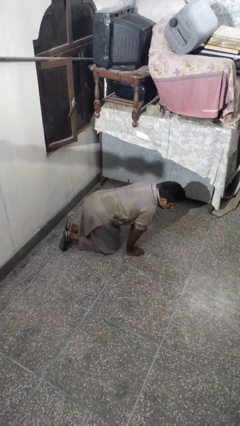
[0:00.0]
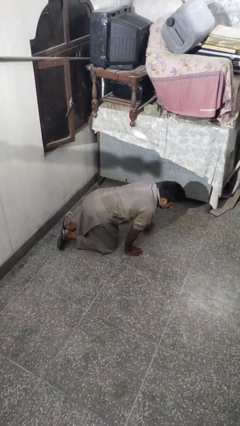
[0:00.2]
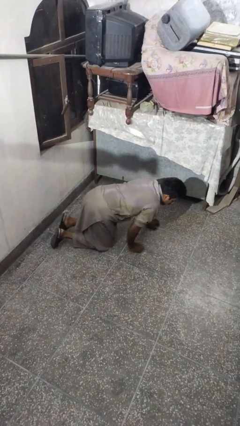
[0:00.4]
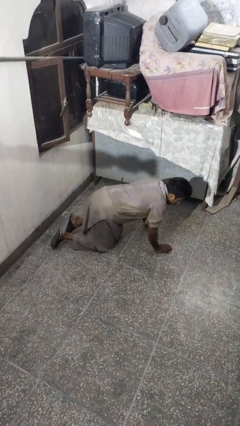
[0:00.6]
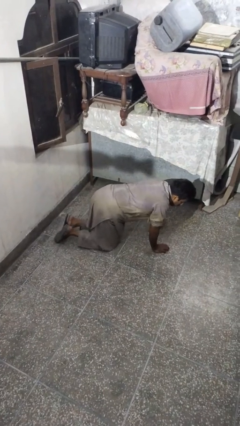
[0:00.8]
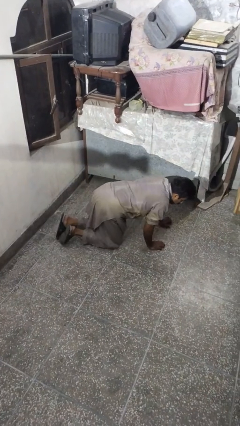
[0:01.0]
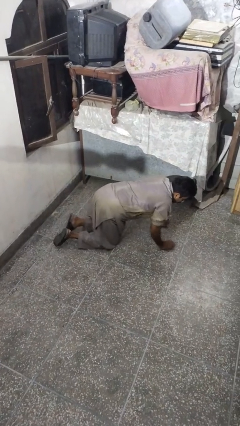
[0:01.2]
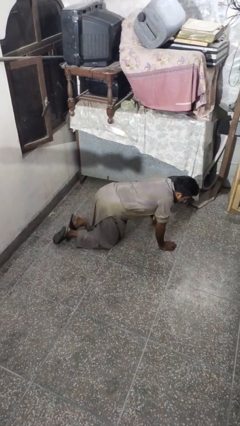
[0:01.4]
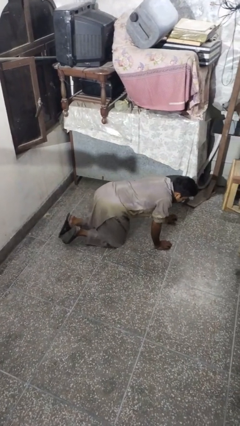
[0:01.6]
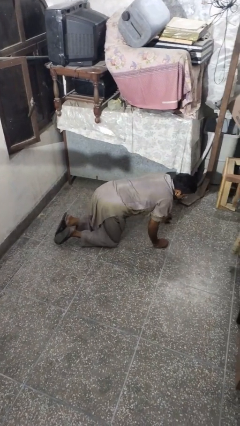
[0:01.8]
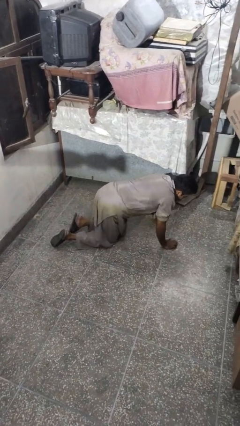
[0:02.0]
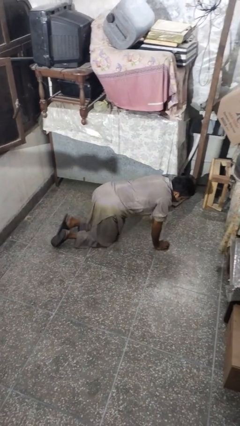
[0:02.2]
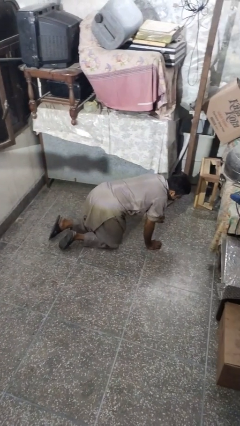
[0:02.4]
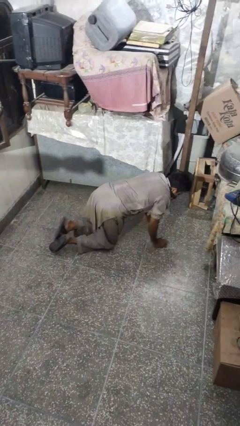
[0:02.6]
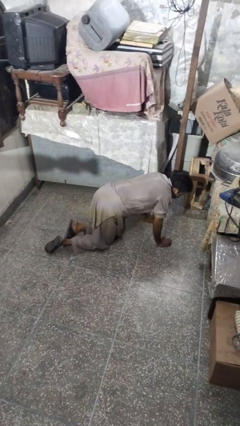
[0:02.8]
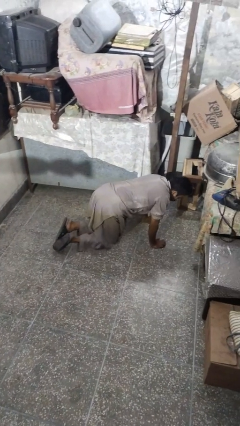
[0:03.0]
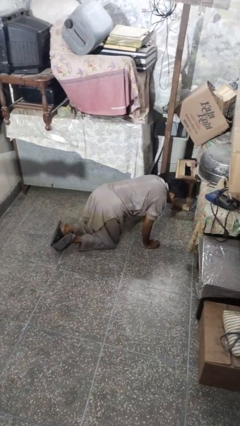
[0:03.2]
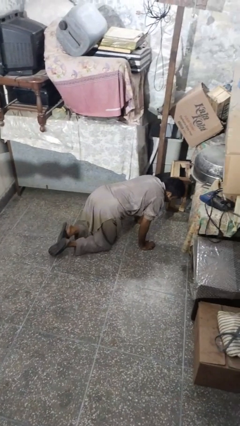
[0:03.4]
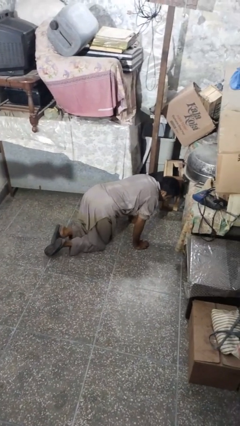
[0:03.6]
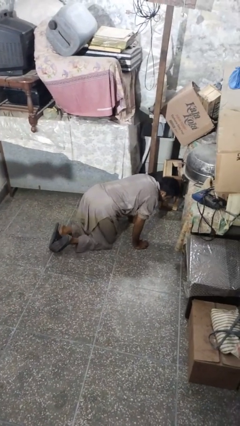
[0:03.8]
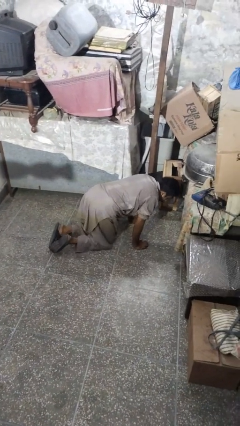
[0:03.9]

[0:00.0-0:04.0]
person crawls

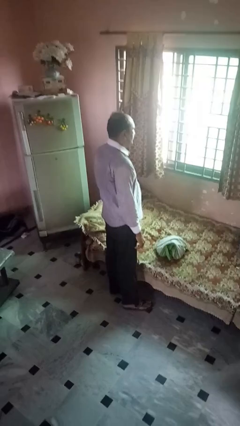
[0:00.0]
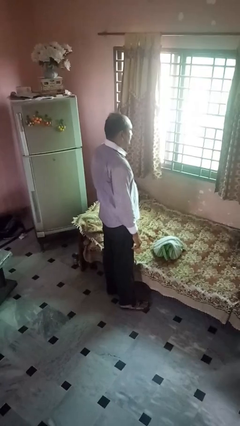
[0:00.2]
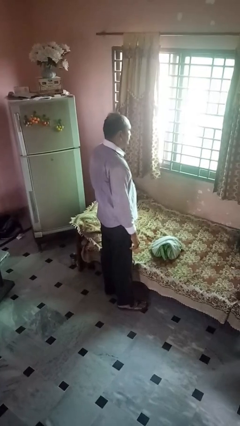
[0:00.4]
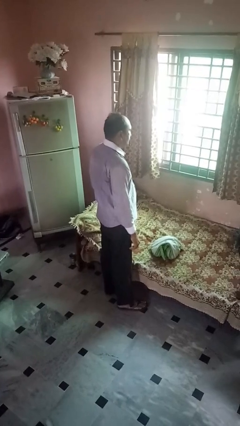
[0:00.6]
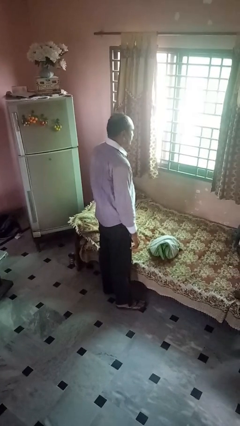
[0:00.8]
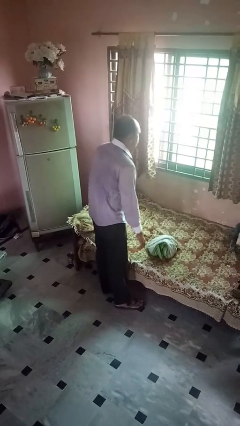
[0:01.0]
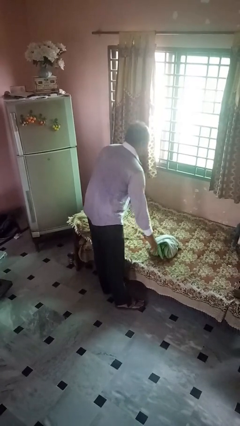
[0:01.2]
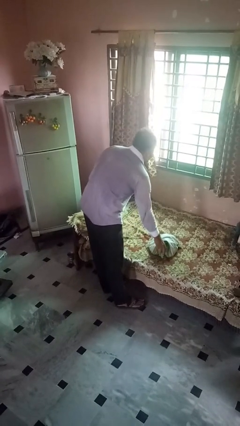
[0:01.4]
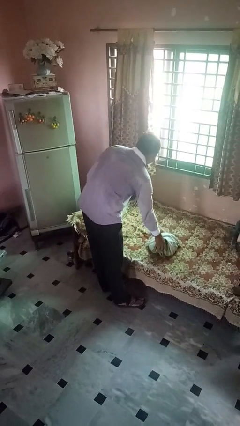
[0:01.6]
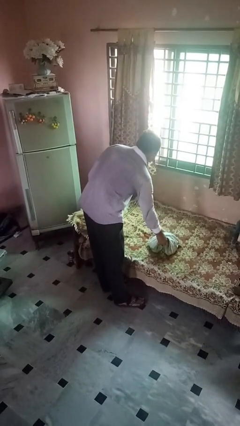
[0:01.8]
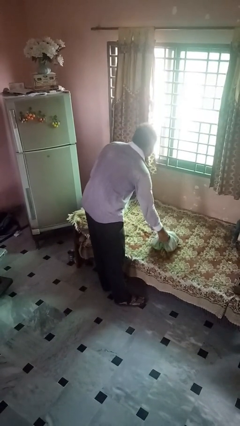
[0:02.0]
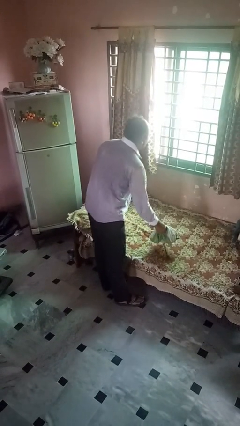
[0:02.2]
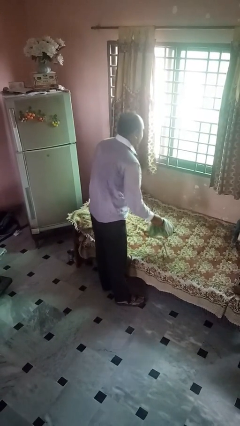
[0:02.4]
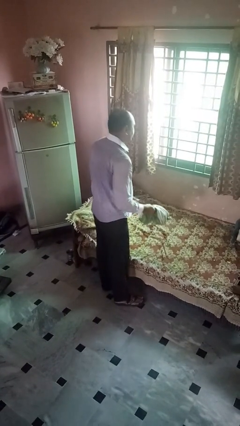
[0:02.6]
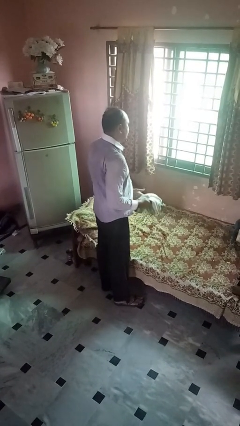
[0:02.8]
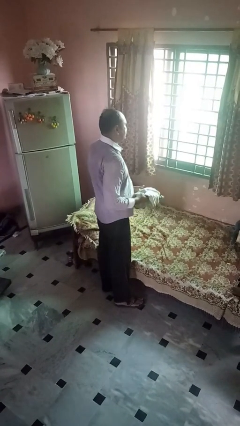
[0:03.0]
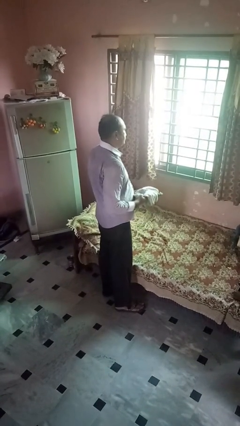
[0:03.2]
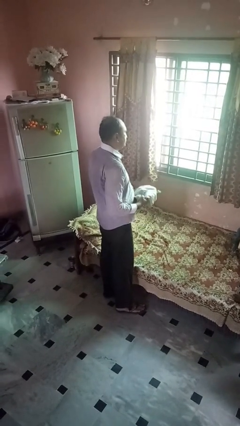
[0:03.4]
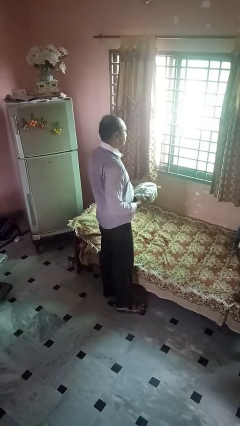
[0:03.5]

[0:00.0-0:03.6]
person picks up object from bed

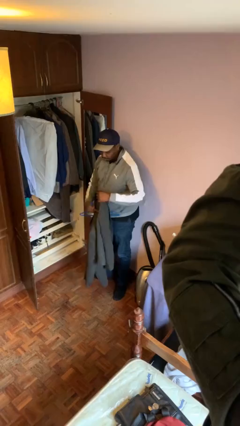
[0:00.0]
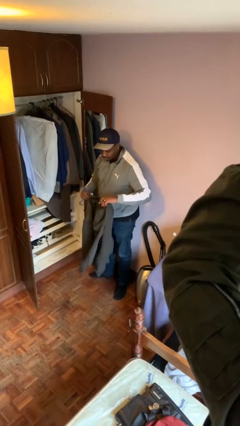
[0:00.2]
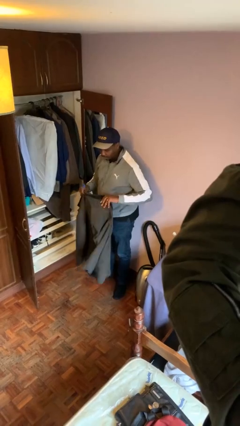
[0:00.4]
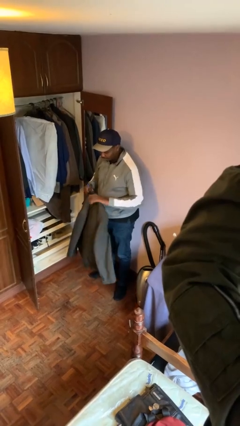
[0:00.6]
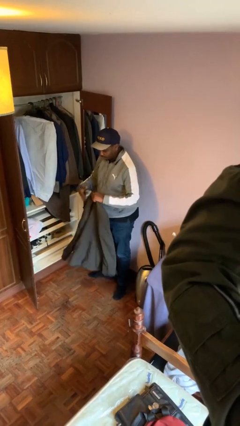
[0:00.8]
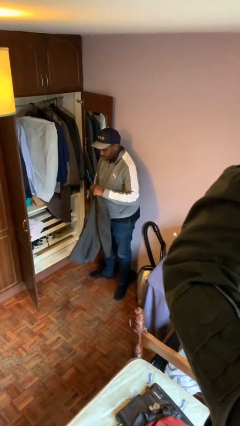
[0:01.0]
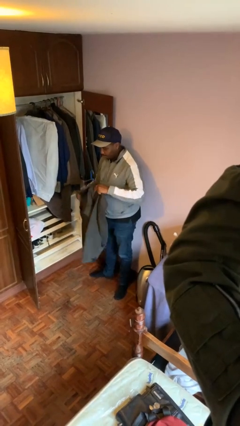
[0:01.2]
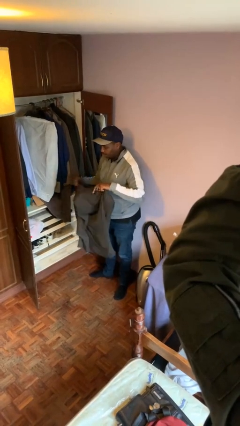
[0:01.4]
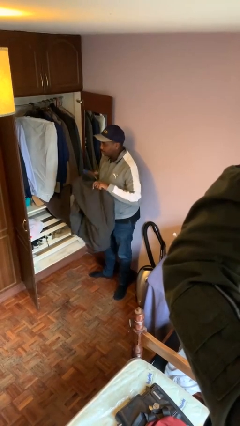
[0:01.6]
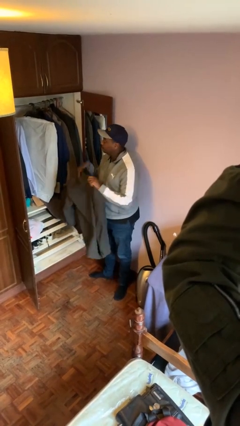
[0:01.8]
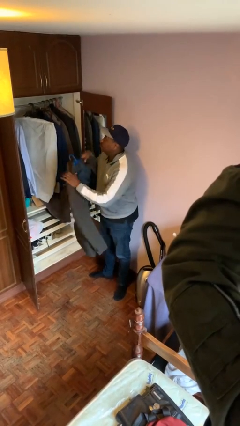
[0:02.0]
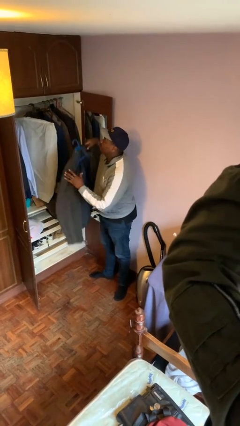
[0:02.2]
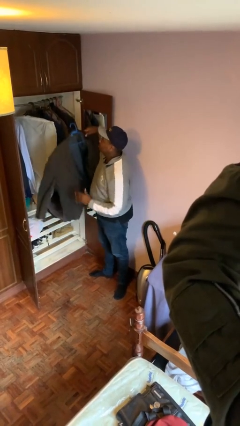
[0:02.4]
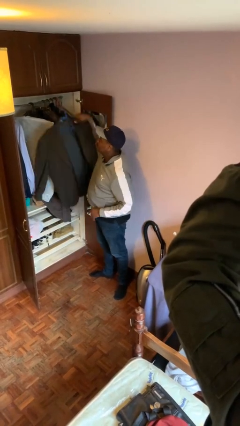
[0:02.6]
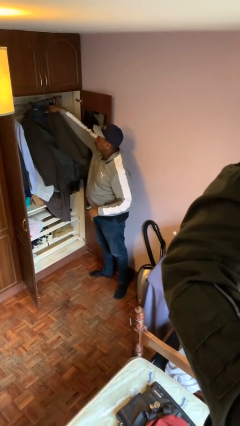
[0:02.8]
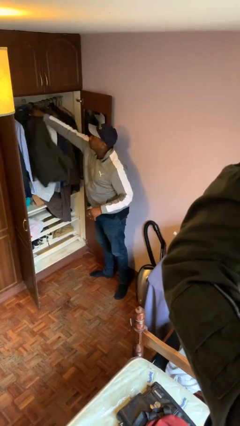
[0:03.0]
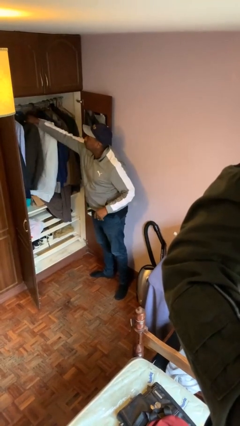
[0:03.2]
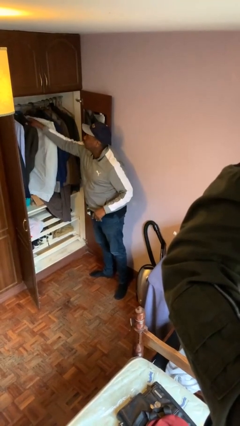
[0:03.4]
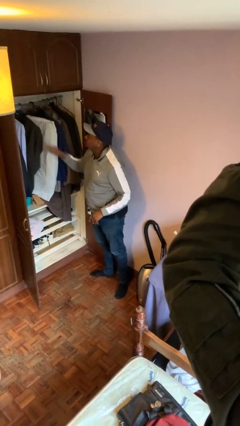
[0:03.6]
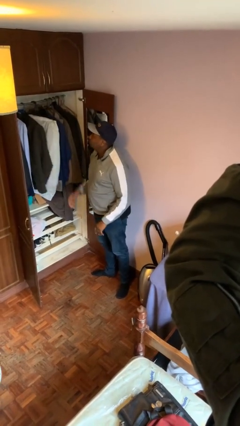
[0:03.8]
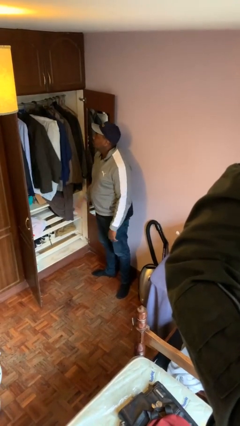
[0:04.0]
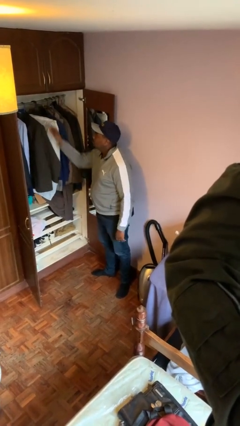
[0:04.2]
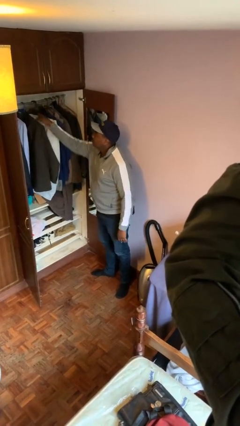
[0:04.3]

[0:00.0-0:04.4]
person puts clothes into closet

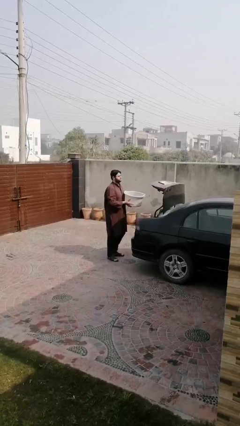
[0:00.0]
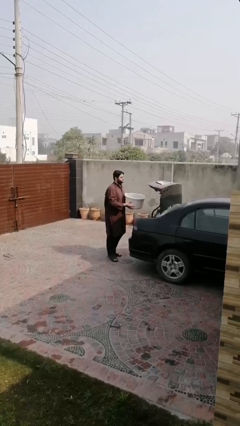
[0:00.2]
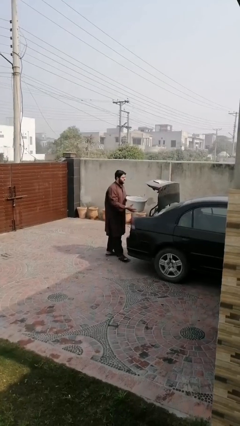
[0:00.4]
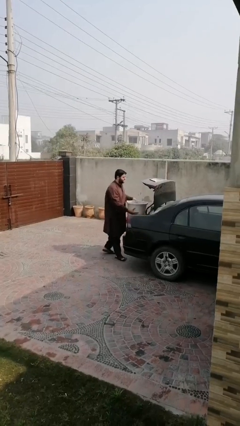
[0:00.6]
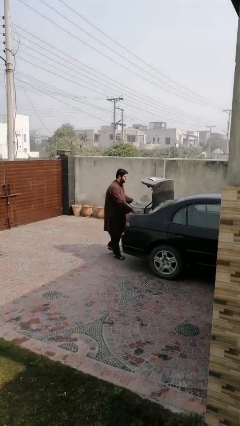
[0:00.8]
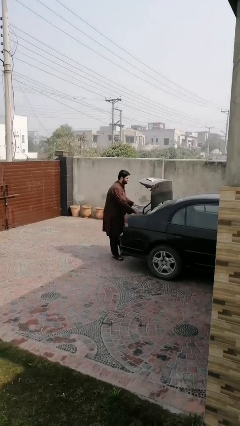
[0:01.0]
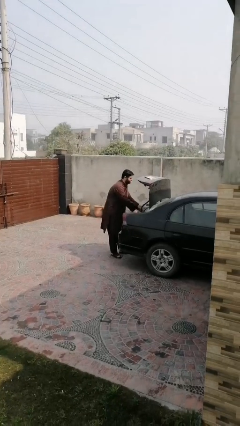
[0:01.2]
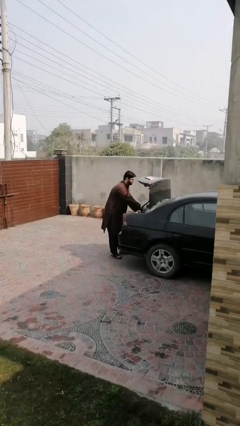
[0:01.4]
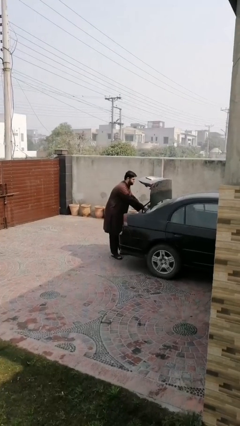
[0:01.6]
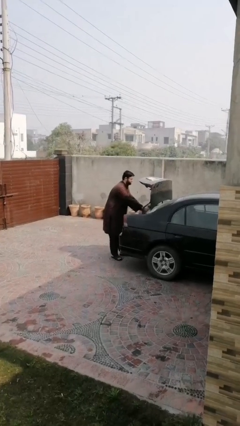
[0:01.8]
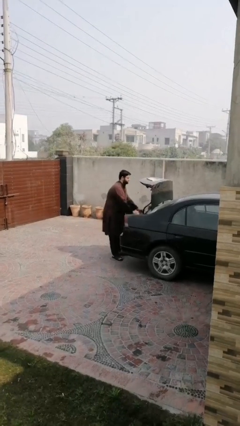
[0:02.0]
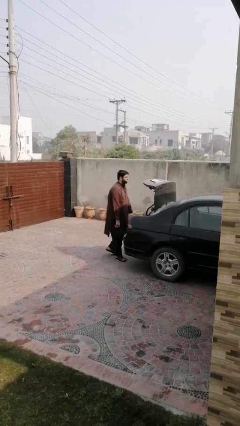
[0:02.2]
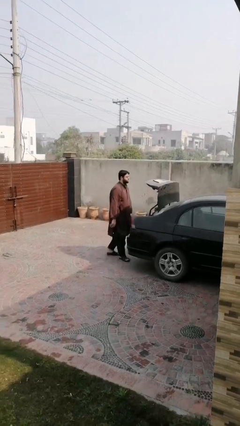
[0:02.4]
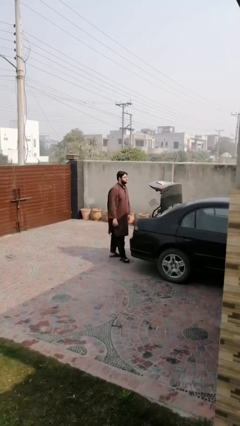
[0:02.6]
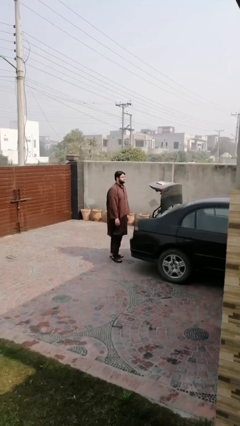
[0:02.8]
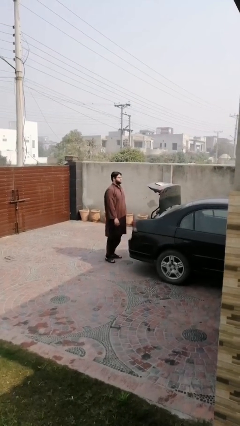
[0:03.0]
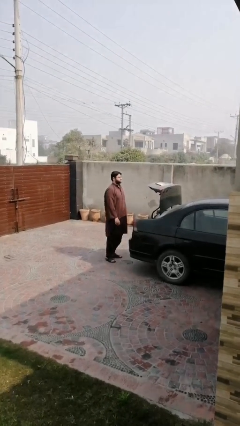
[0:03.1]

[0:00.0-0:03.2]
person loads car

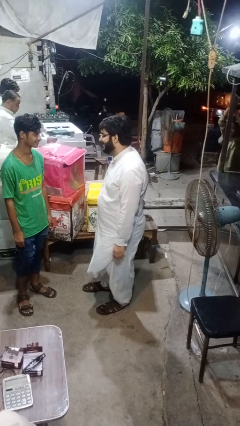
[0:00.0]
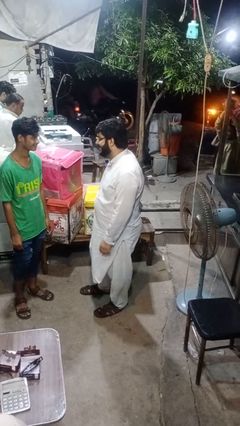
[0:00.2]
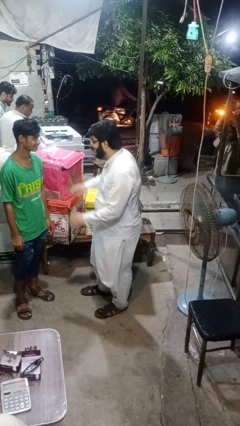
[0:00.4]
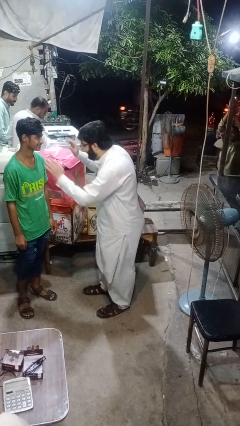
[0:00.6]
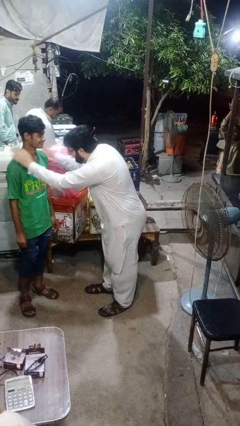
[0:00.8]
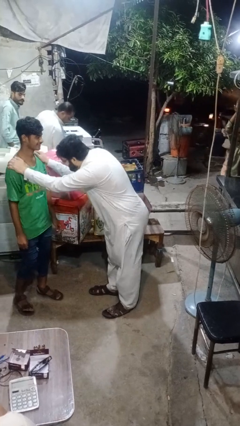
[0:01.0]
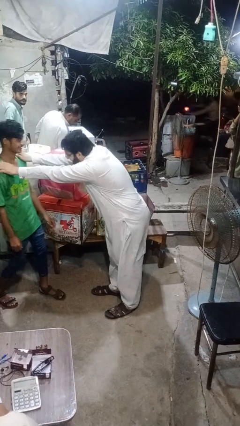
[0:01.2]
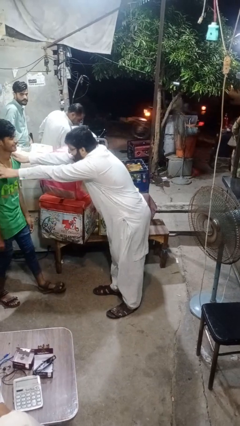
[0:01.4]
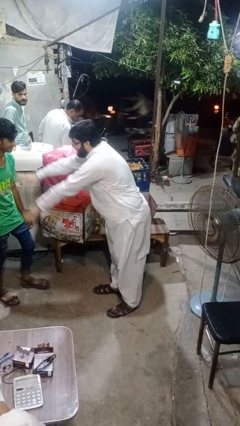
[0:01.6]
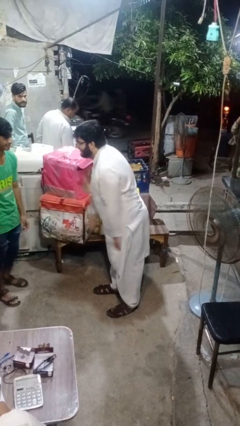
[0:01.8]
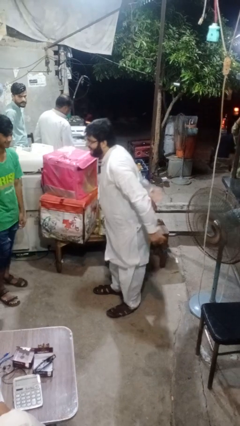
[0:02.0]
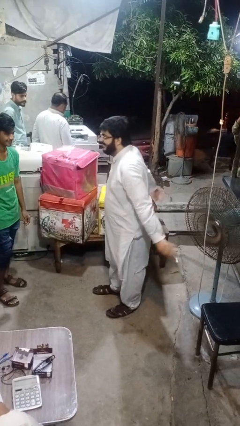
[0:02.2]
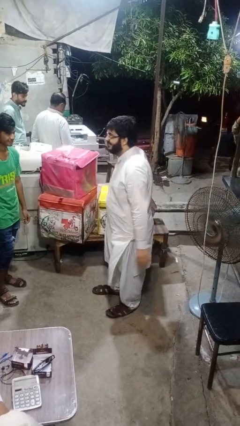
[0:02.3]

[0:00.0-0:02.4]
person shoves person

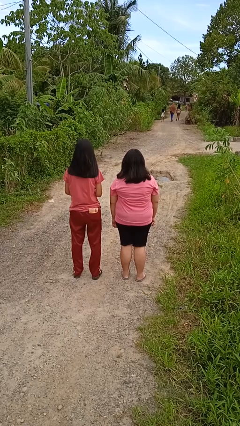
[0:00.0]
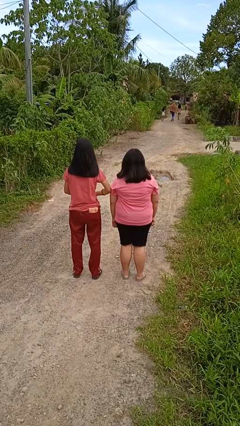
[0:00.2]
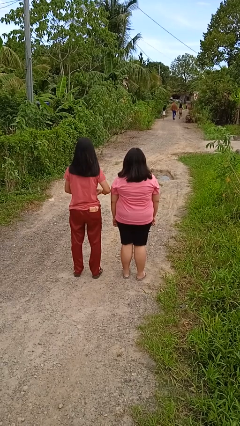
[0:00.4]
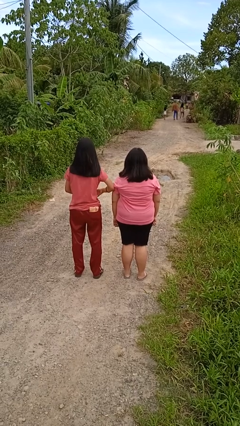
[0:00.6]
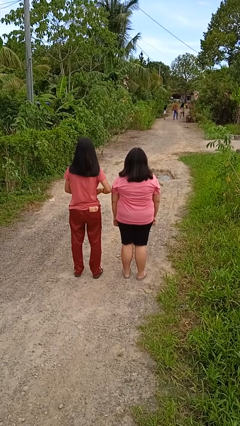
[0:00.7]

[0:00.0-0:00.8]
person nudges person with elbow
